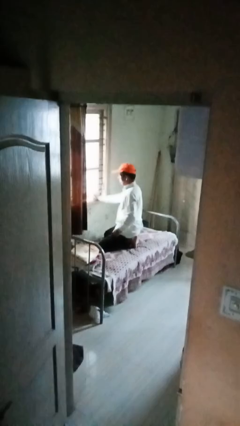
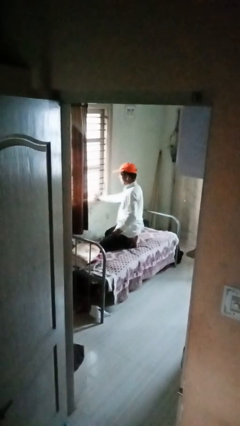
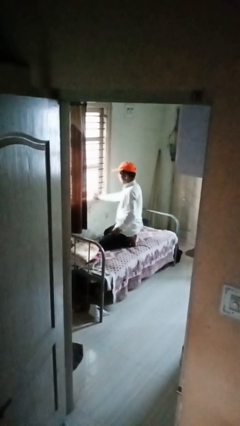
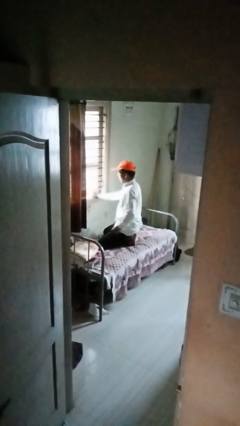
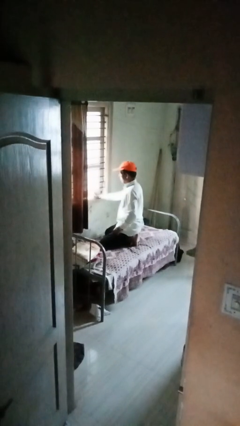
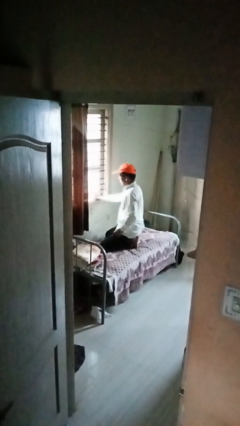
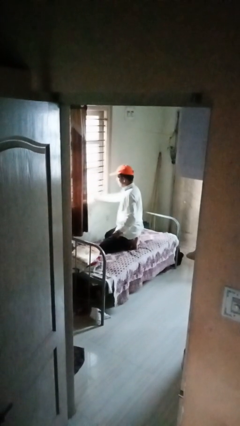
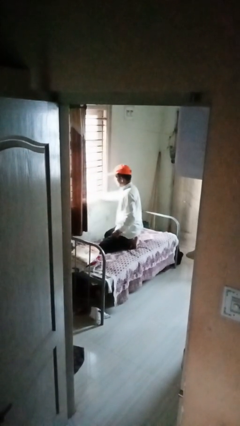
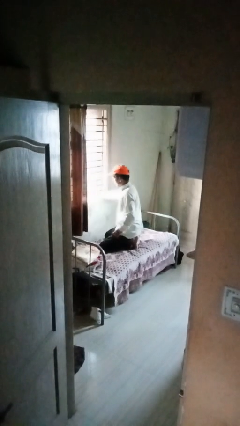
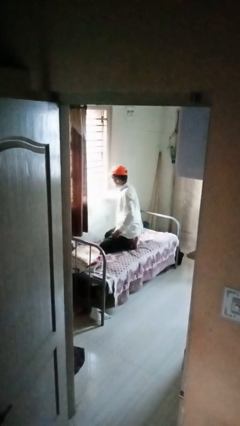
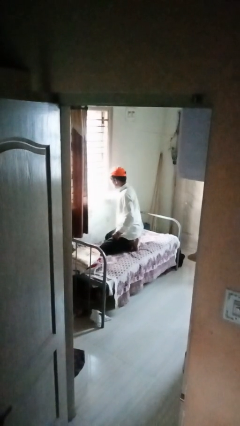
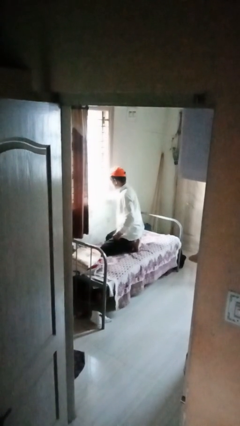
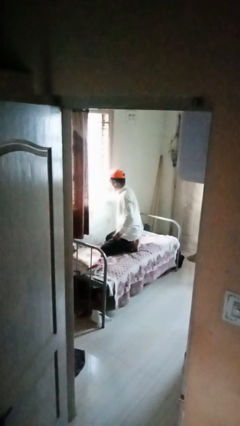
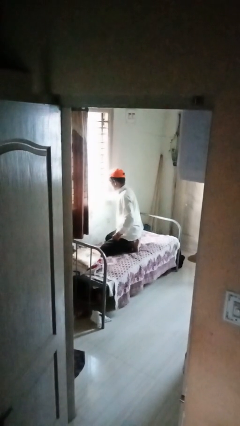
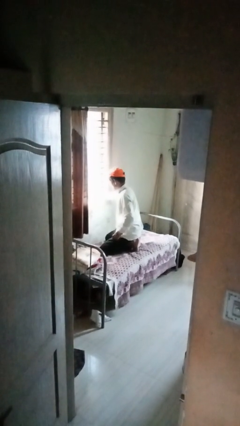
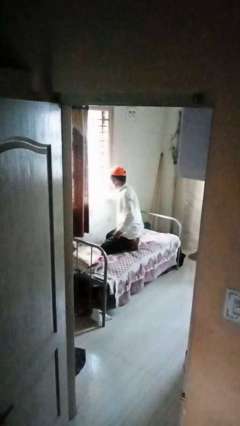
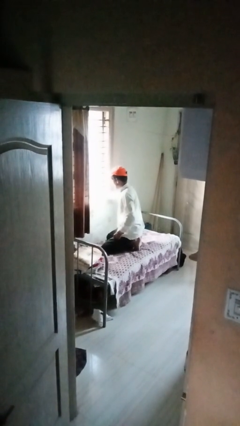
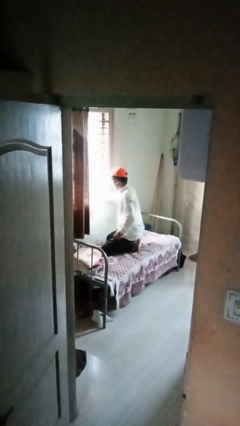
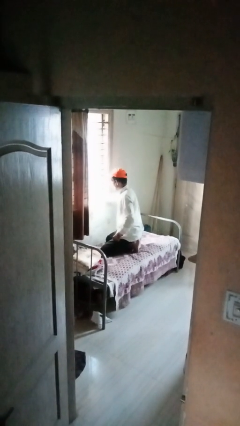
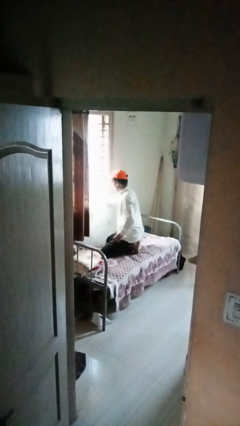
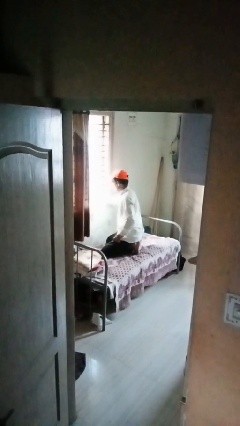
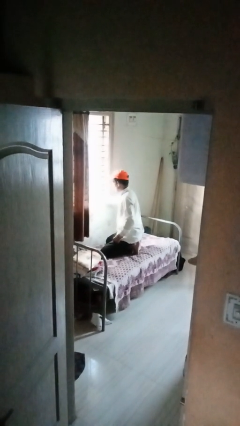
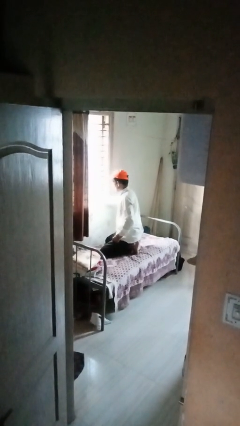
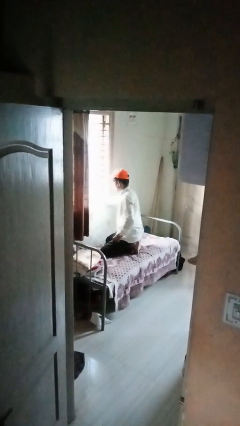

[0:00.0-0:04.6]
person opens home window

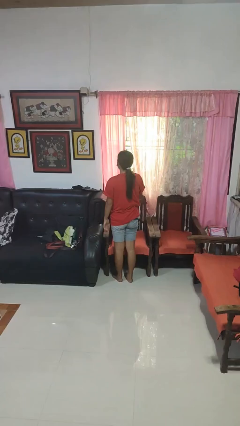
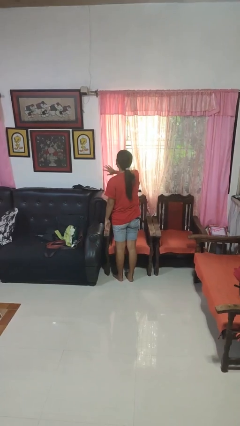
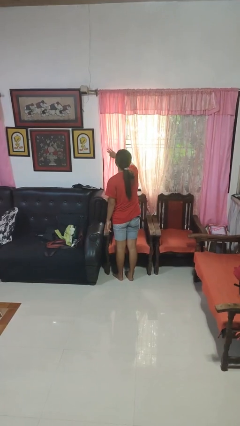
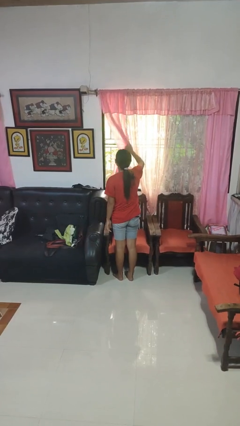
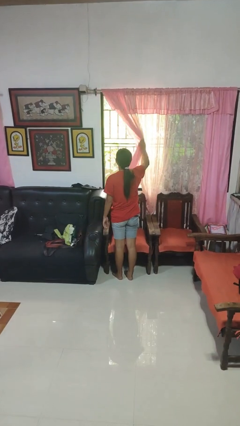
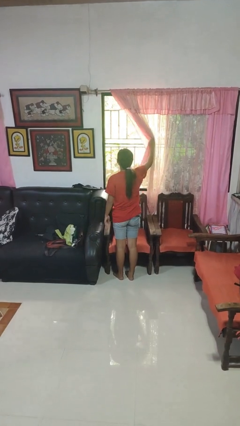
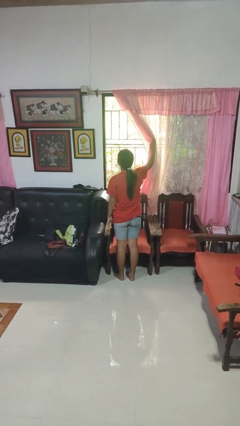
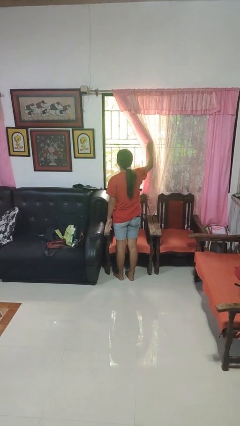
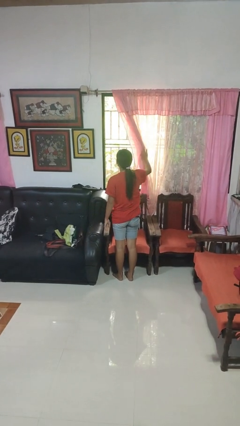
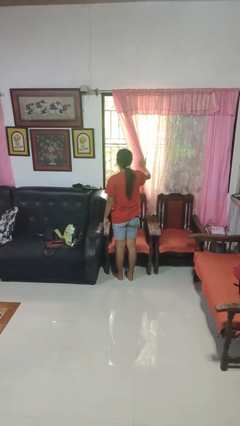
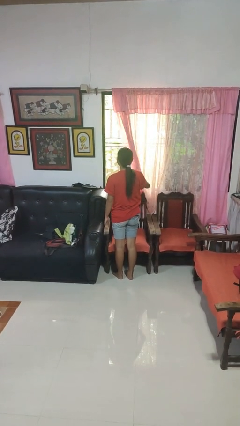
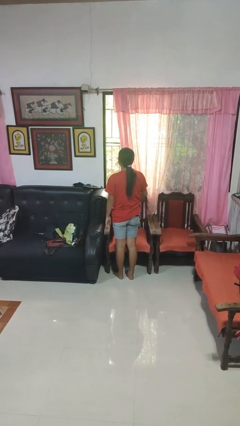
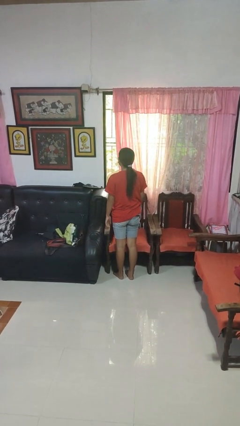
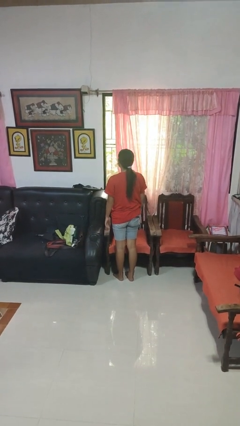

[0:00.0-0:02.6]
person opens curtains

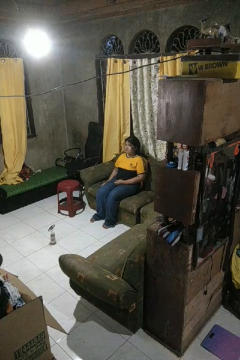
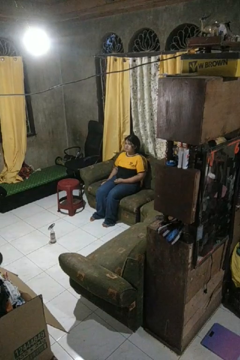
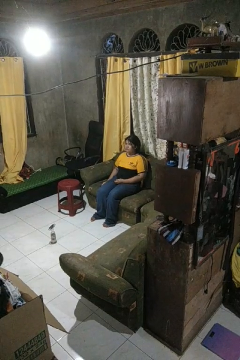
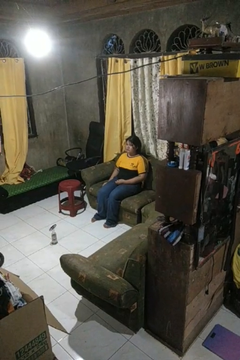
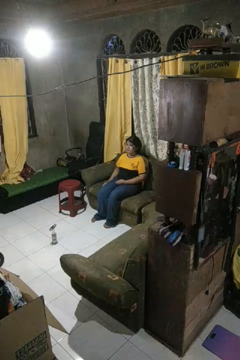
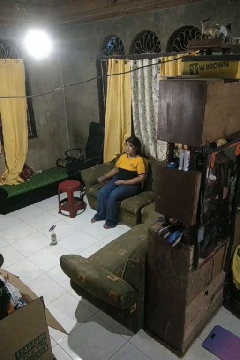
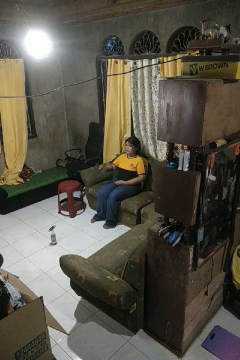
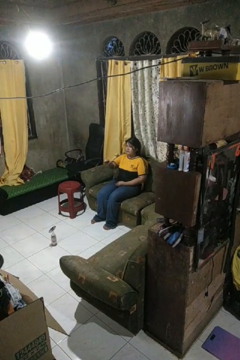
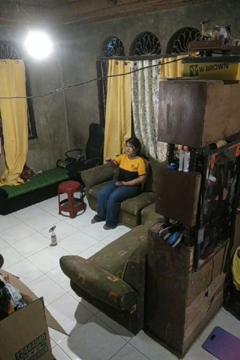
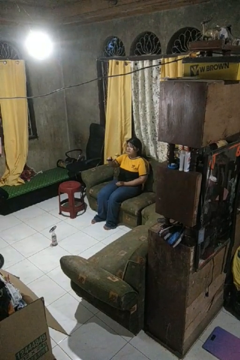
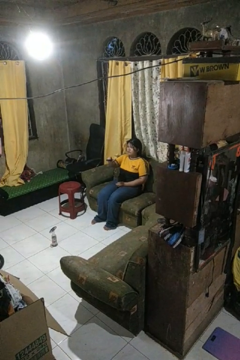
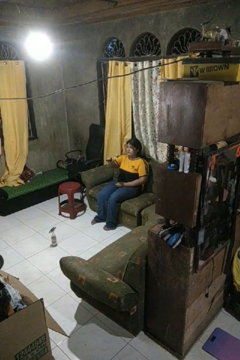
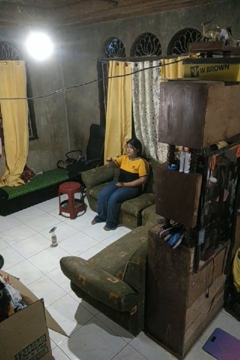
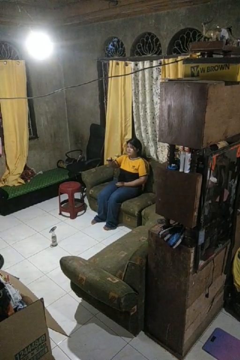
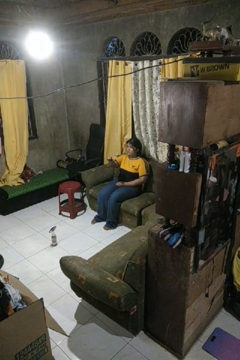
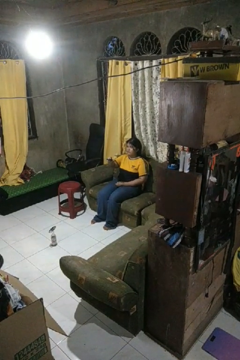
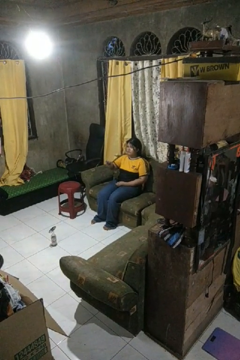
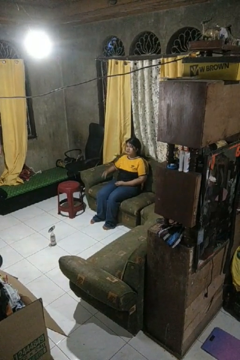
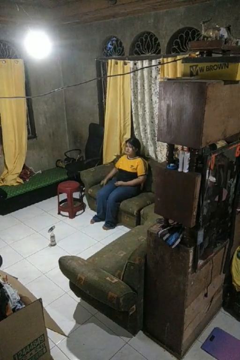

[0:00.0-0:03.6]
person uses television remote

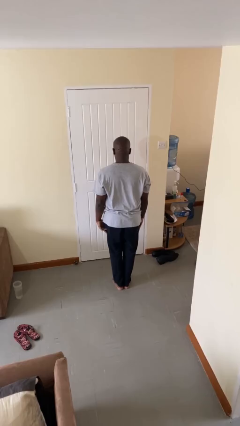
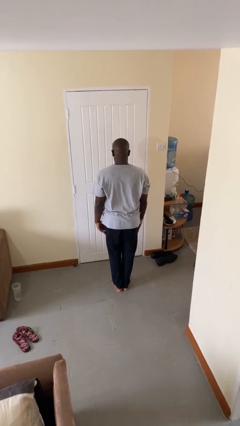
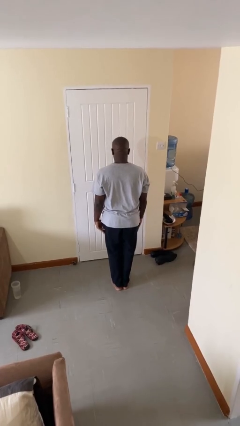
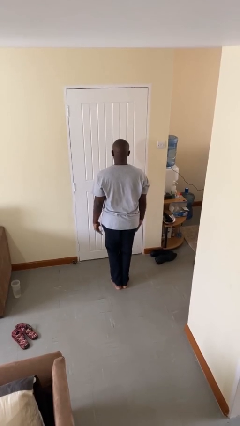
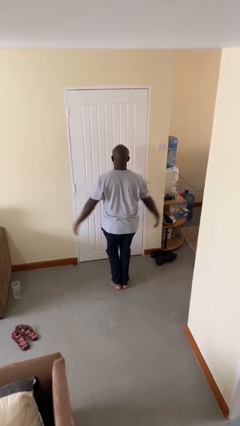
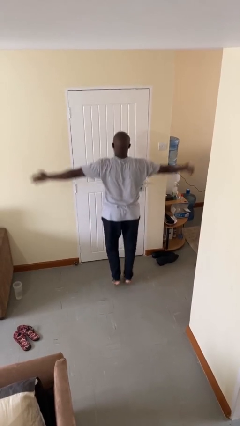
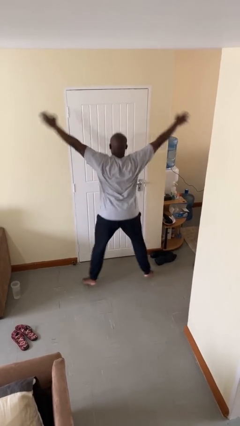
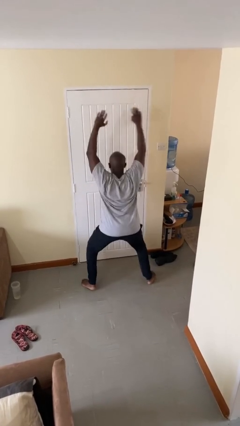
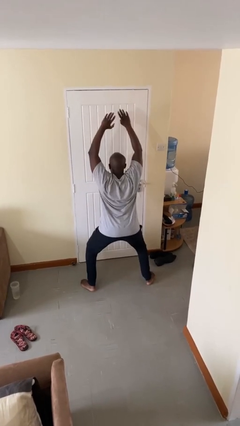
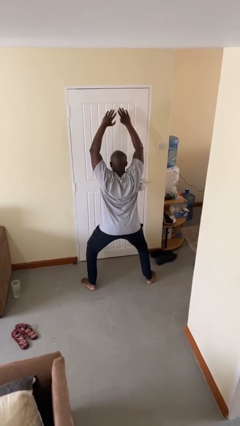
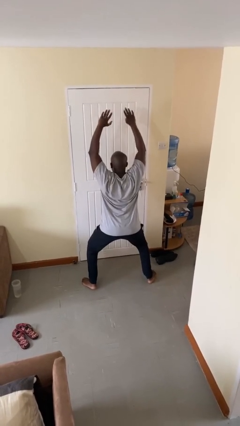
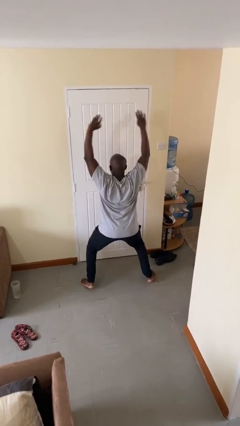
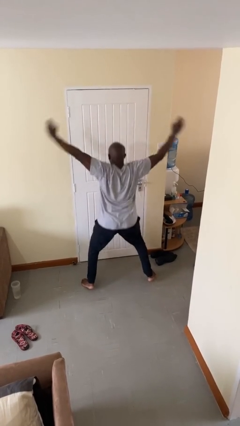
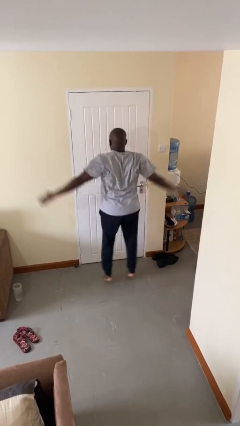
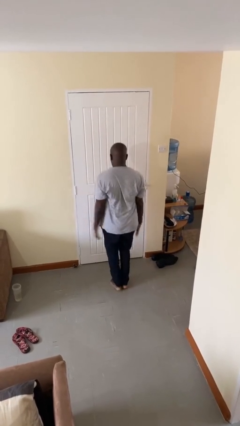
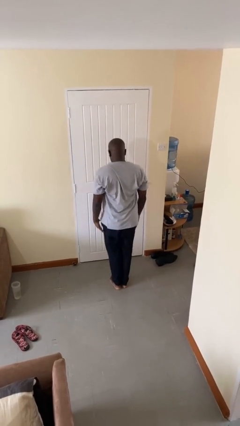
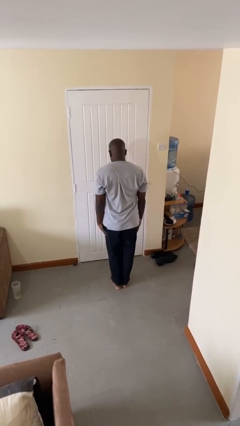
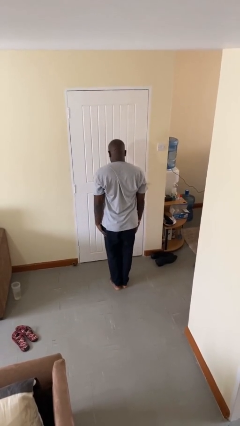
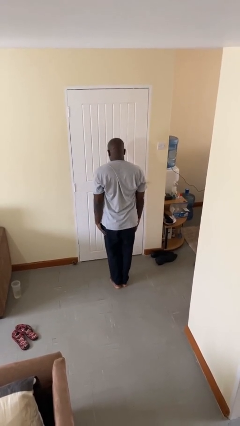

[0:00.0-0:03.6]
person exercises with jumping jacks

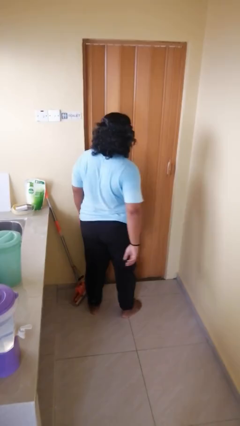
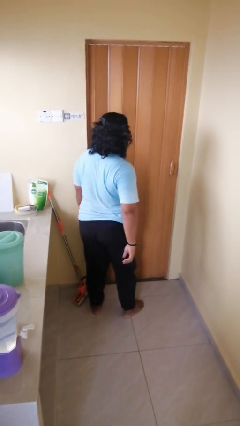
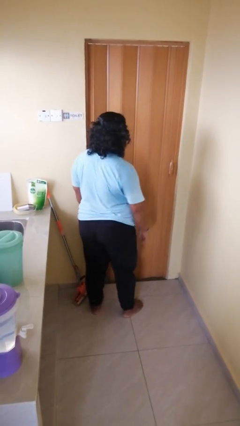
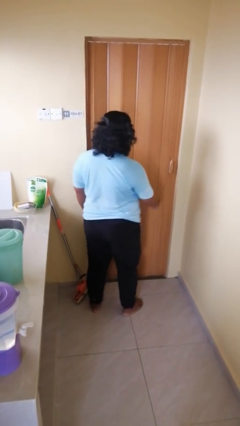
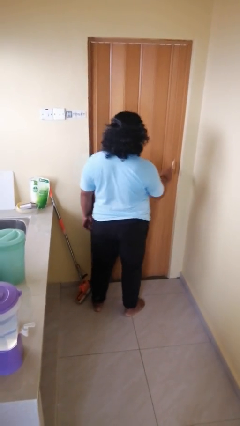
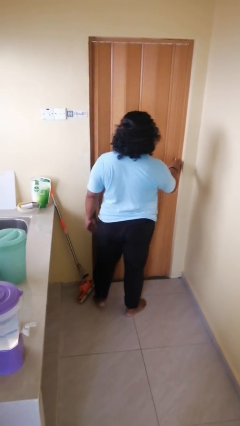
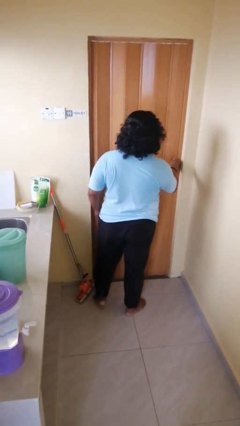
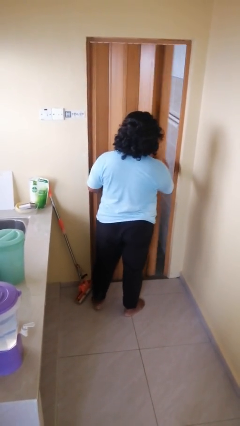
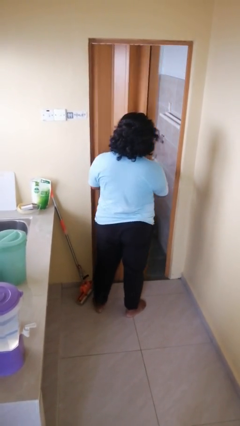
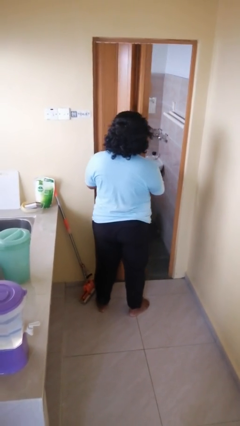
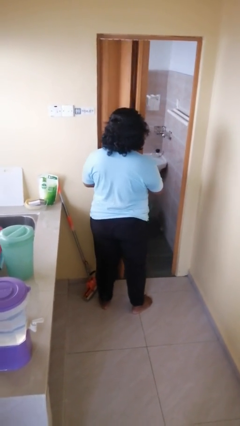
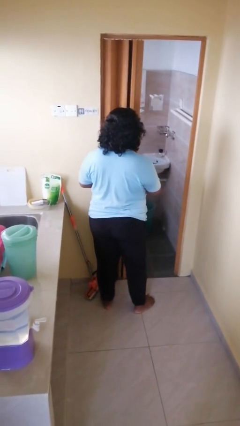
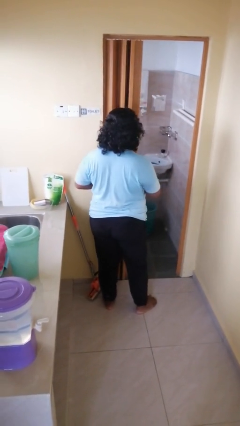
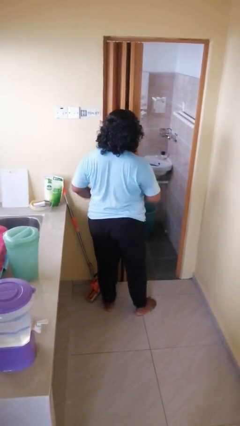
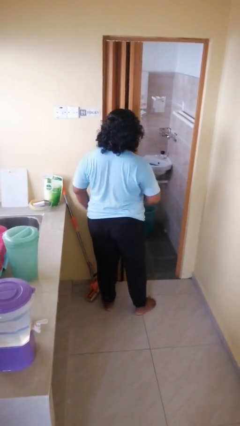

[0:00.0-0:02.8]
person opens sliding door

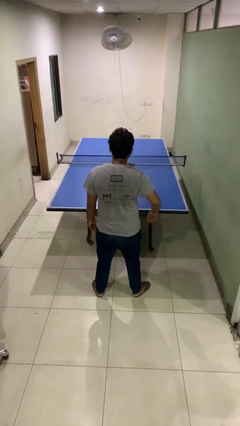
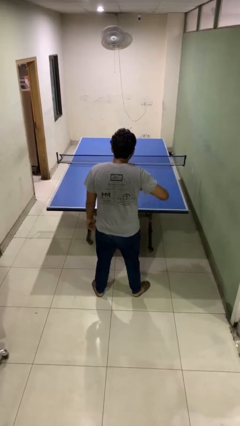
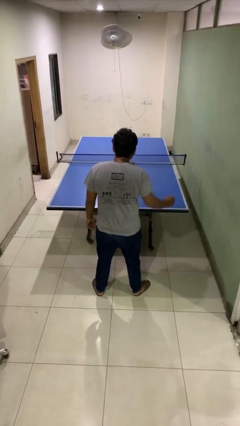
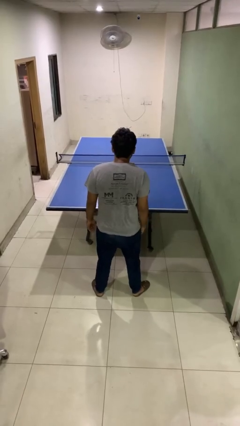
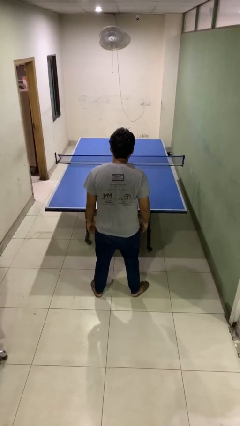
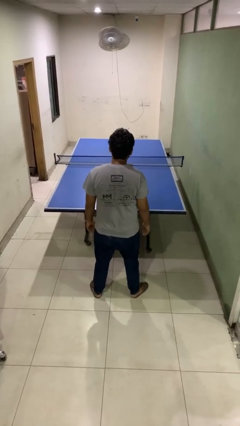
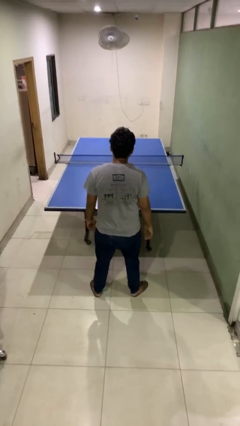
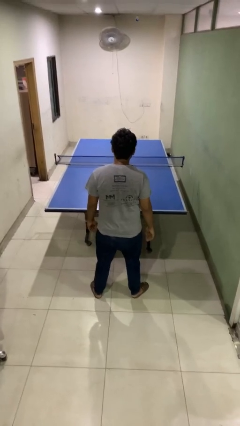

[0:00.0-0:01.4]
person slaps hands on thighs
